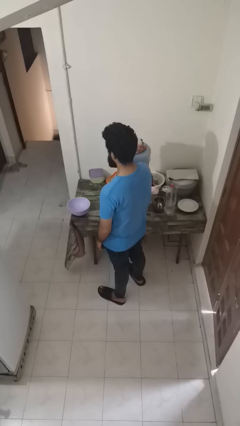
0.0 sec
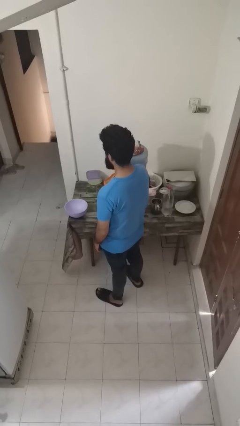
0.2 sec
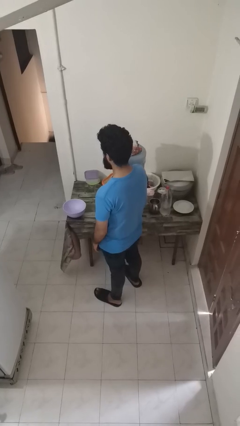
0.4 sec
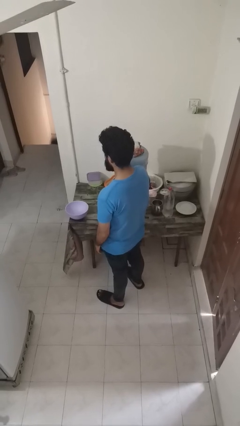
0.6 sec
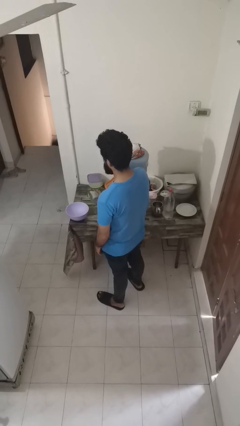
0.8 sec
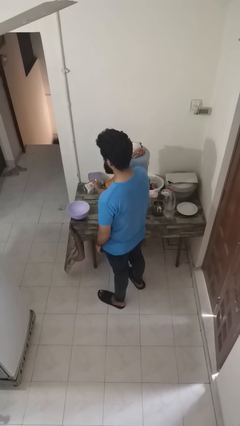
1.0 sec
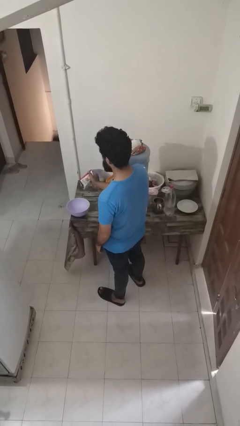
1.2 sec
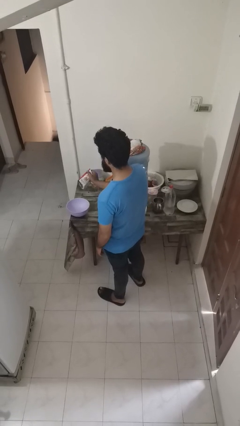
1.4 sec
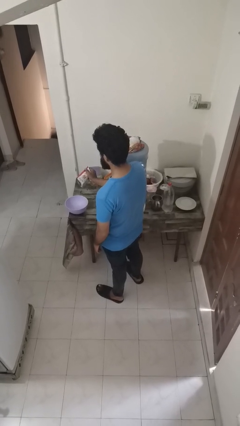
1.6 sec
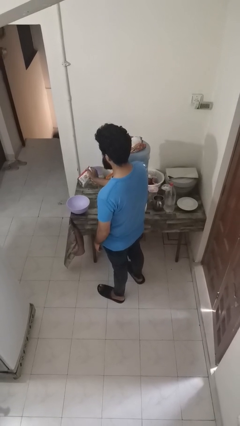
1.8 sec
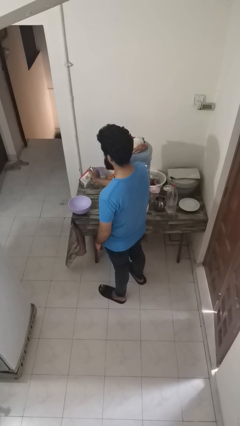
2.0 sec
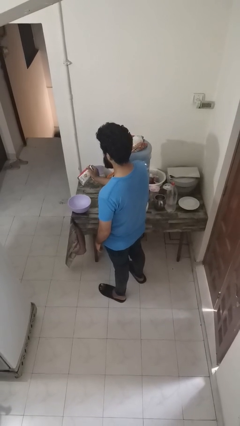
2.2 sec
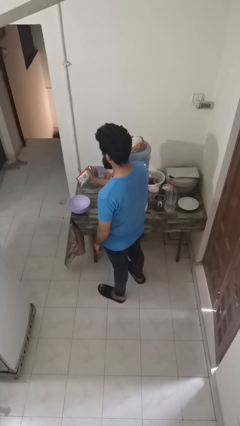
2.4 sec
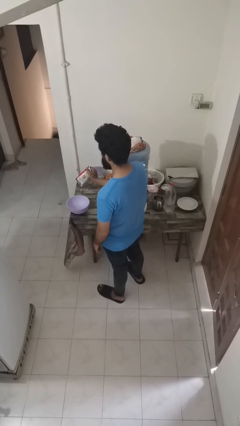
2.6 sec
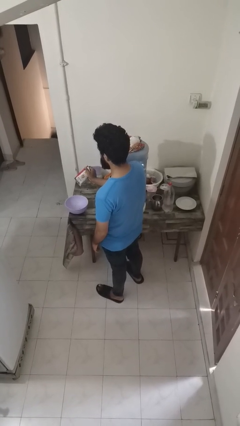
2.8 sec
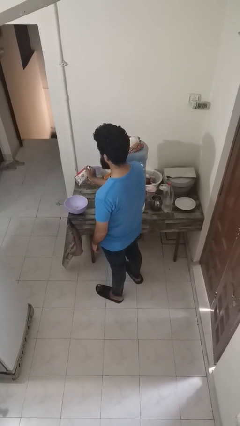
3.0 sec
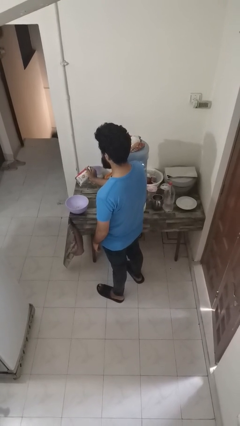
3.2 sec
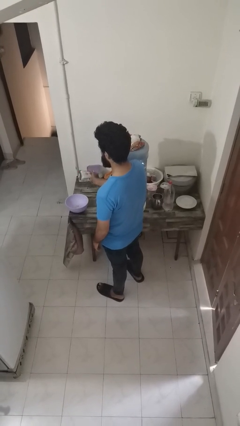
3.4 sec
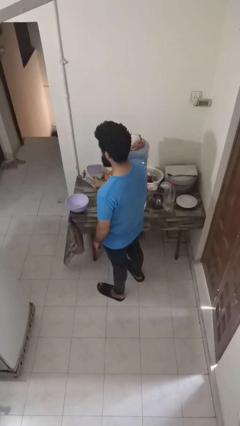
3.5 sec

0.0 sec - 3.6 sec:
person pours into bowl

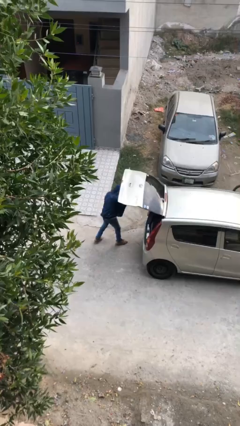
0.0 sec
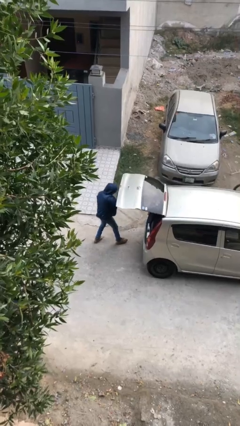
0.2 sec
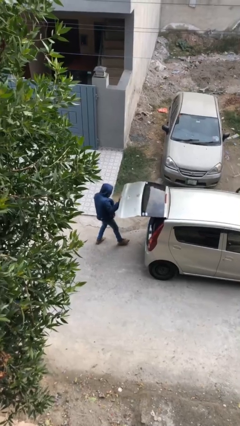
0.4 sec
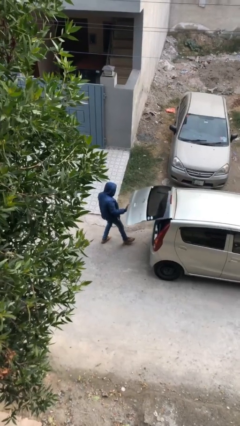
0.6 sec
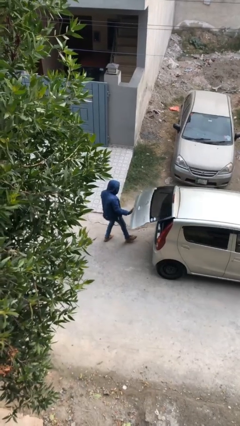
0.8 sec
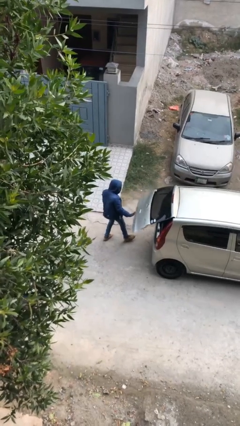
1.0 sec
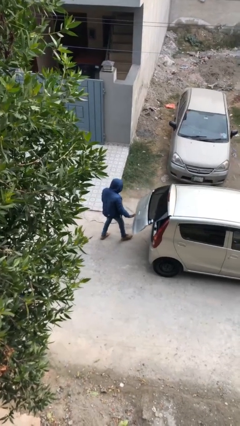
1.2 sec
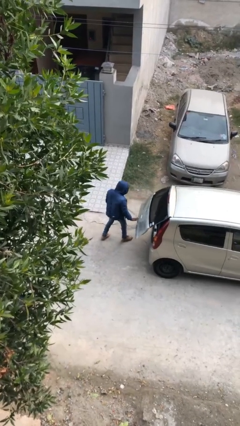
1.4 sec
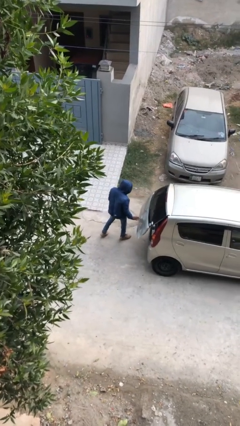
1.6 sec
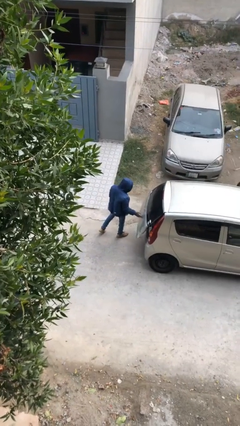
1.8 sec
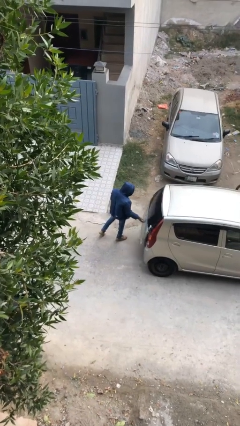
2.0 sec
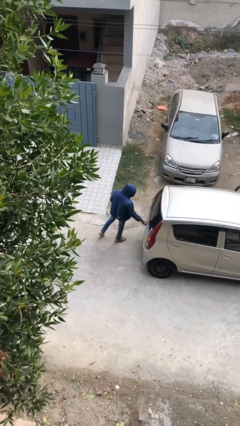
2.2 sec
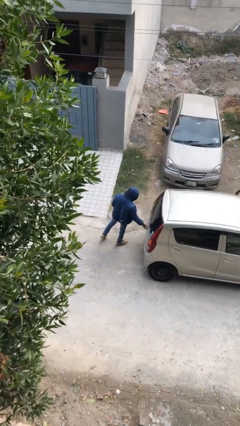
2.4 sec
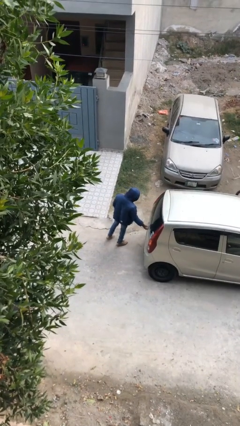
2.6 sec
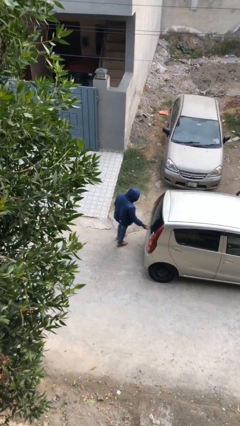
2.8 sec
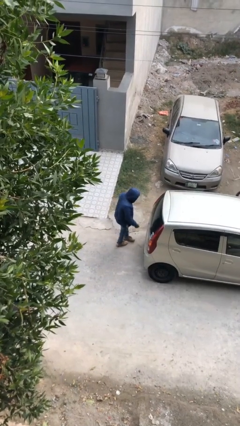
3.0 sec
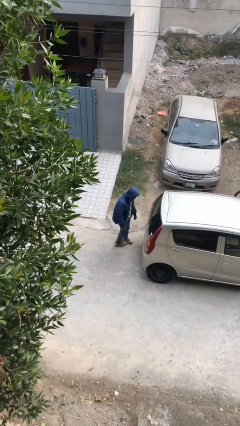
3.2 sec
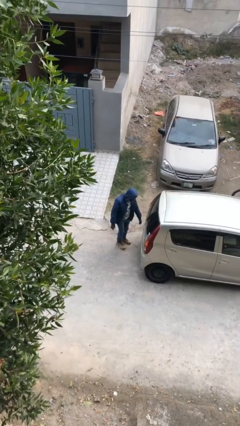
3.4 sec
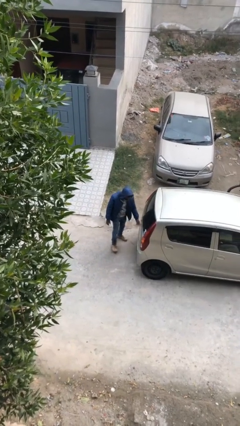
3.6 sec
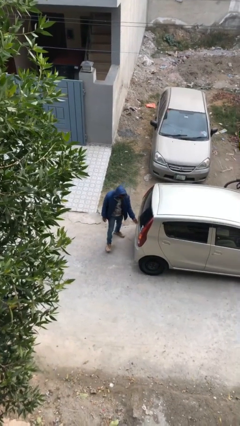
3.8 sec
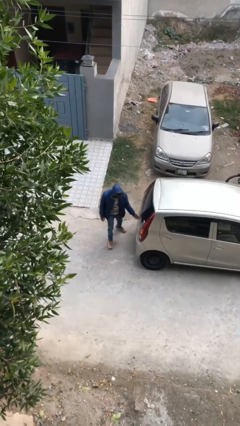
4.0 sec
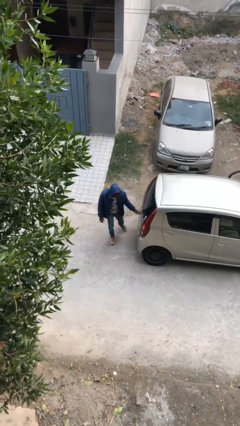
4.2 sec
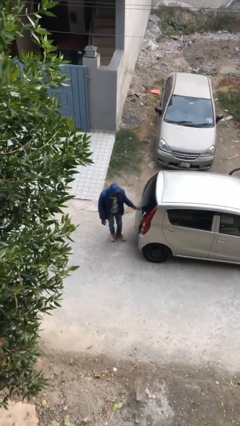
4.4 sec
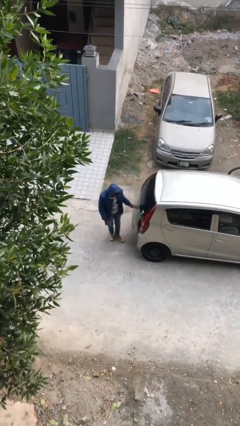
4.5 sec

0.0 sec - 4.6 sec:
person closes car trunk

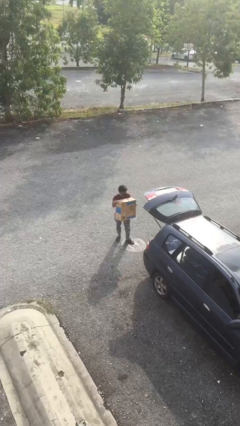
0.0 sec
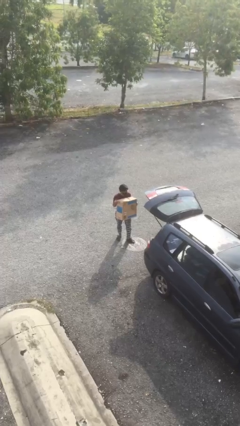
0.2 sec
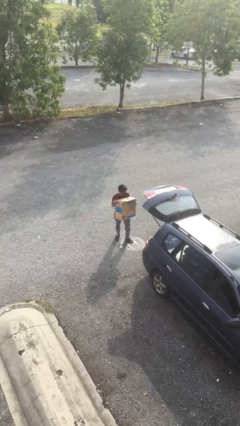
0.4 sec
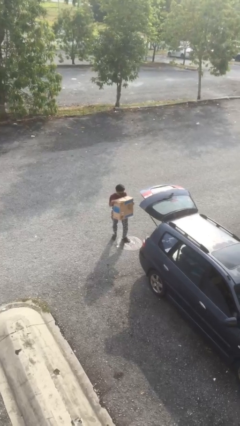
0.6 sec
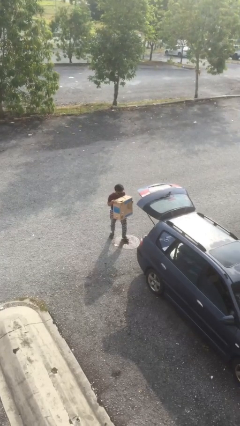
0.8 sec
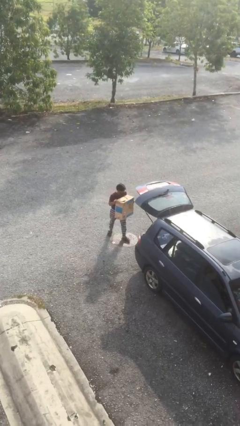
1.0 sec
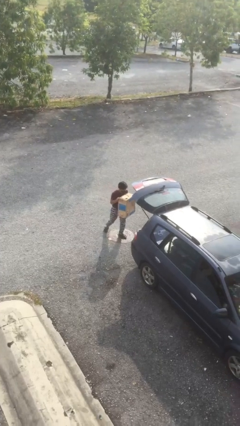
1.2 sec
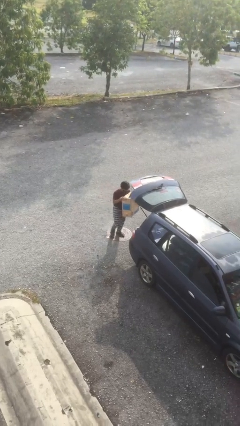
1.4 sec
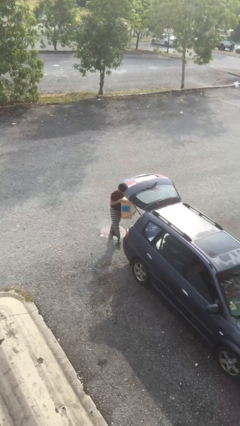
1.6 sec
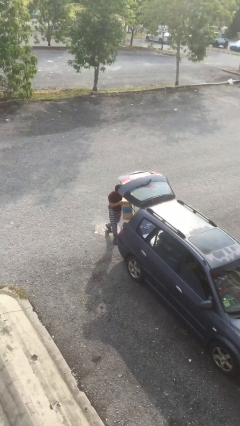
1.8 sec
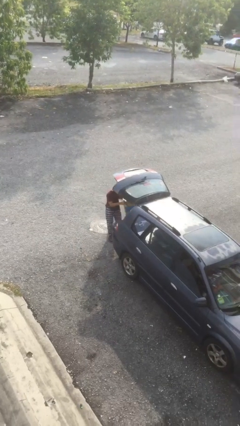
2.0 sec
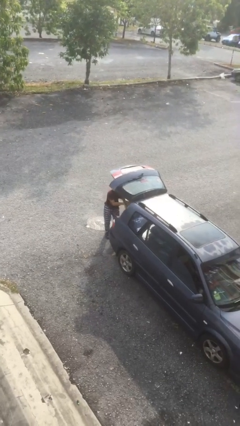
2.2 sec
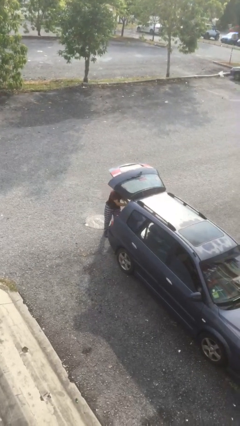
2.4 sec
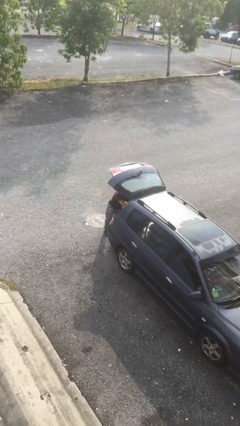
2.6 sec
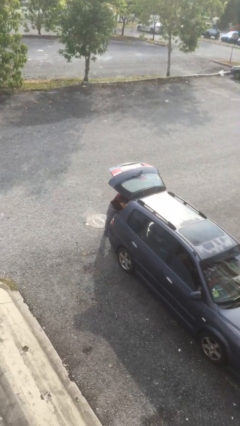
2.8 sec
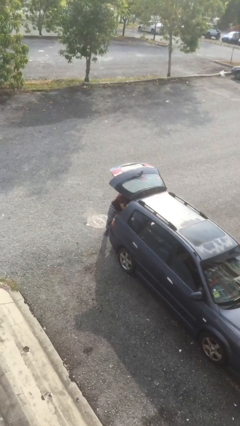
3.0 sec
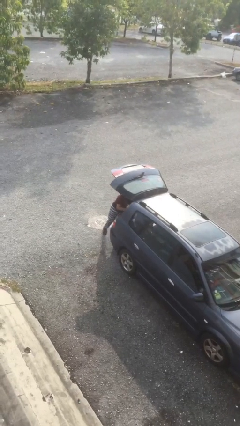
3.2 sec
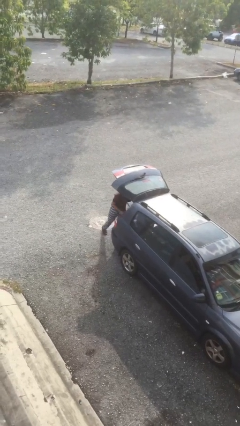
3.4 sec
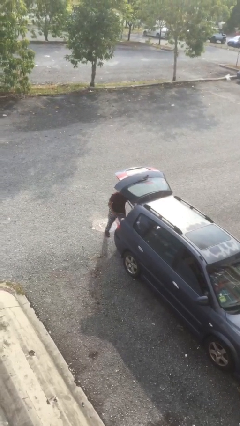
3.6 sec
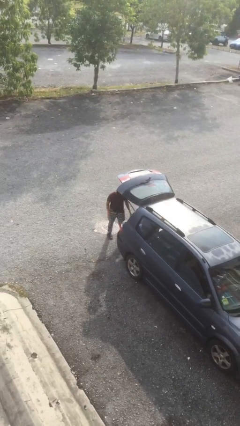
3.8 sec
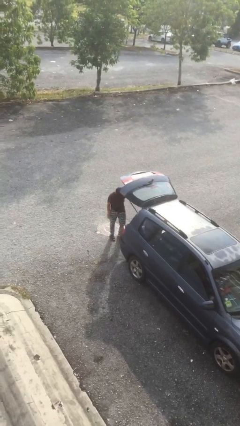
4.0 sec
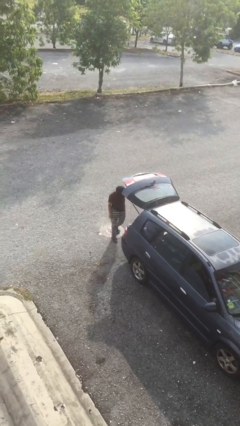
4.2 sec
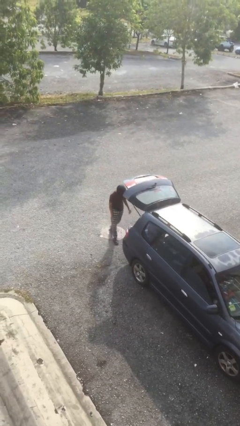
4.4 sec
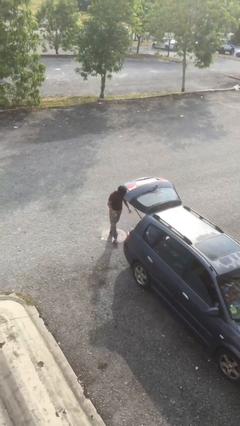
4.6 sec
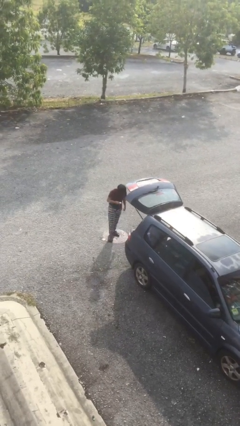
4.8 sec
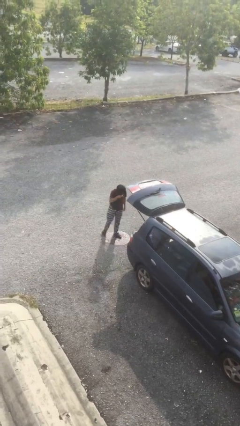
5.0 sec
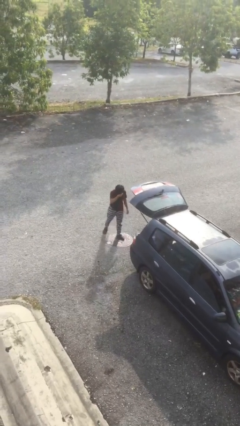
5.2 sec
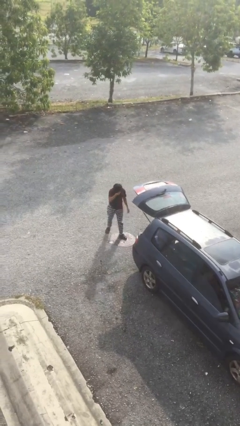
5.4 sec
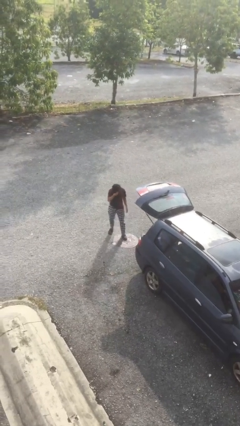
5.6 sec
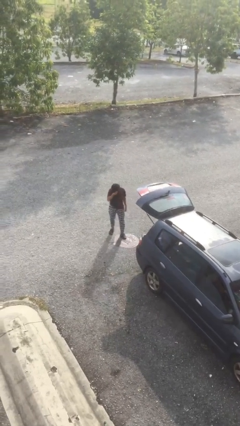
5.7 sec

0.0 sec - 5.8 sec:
person loads car

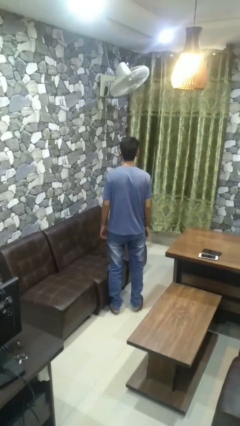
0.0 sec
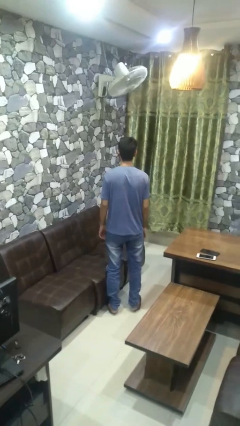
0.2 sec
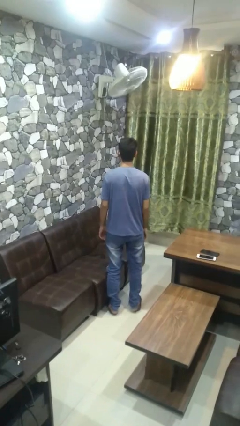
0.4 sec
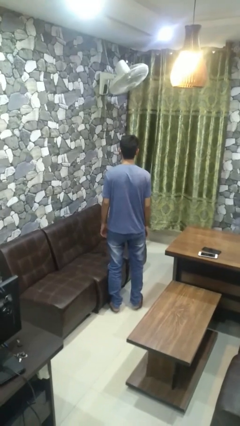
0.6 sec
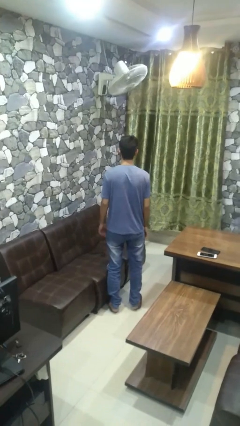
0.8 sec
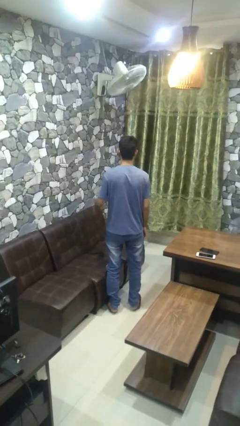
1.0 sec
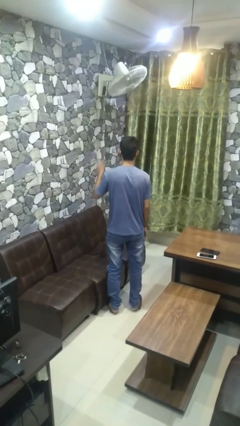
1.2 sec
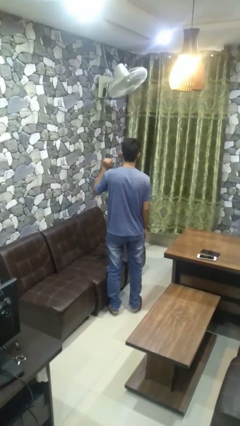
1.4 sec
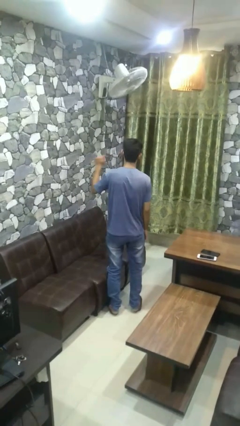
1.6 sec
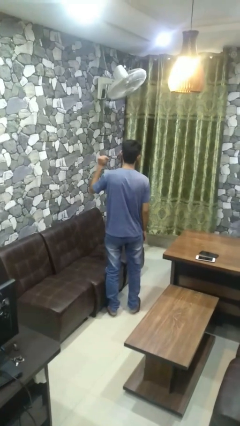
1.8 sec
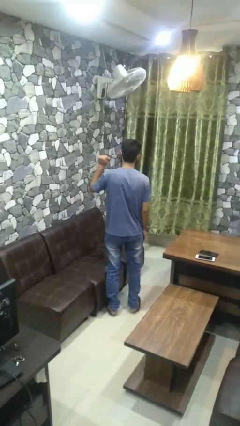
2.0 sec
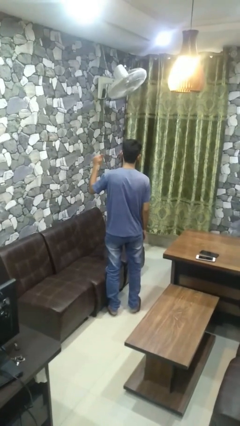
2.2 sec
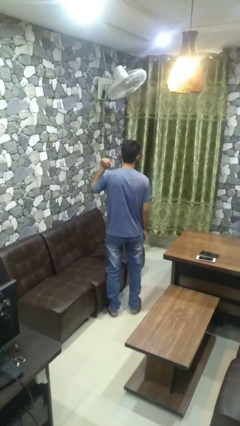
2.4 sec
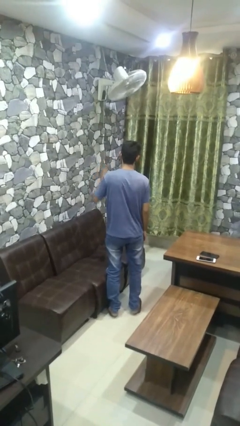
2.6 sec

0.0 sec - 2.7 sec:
person gestures behind me

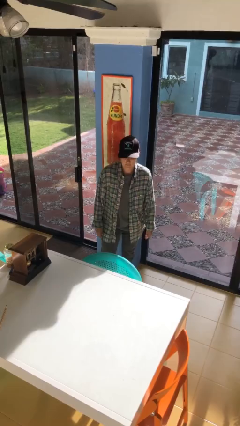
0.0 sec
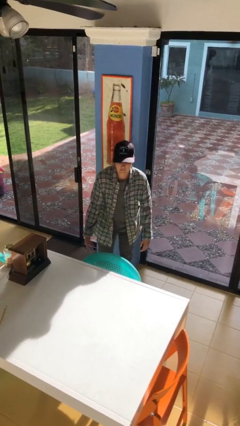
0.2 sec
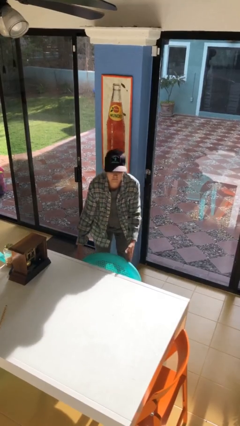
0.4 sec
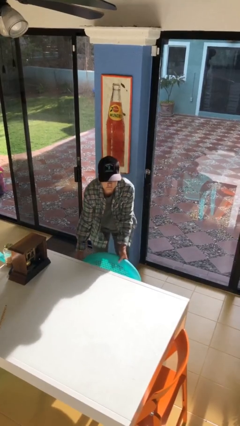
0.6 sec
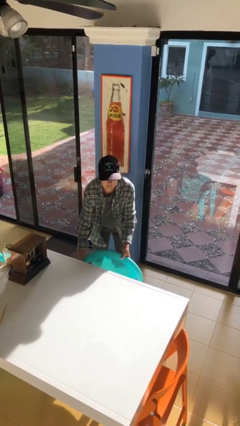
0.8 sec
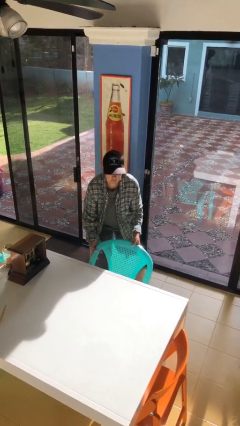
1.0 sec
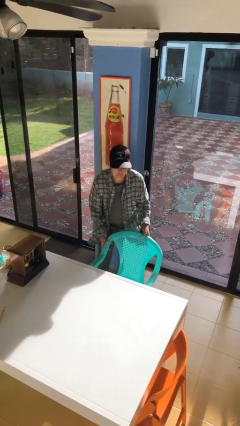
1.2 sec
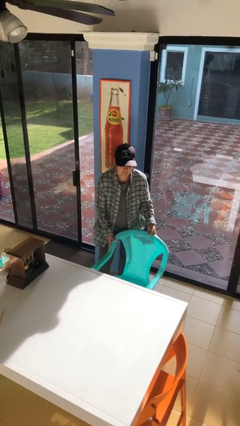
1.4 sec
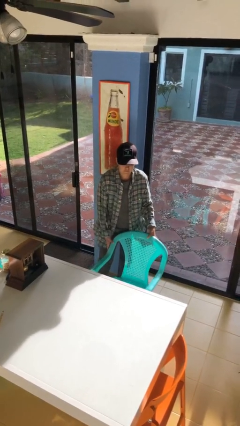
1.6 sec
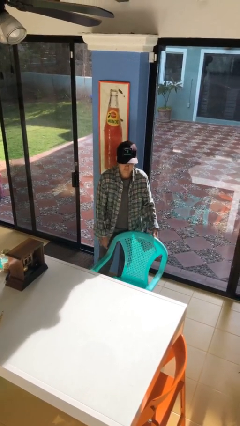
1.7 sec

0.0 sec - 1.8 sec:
person pulls out chair
